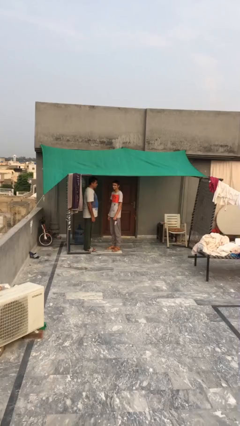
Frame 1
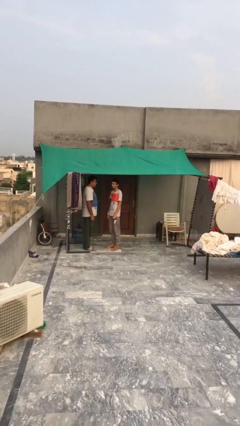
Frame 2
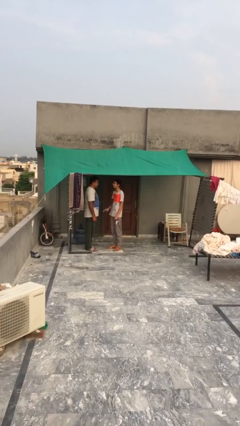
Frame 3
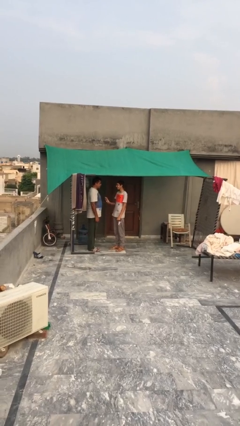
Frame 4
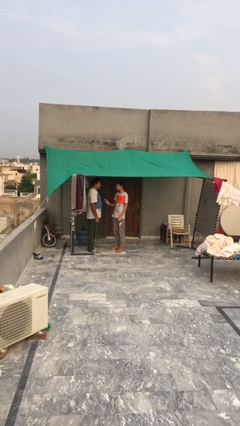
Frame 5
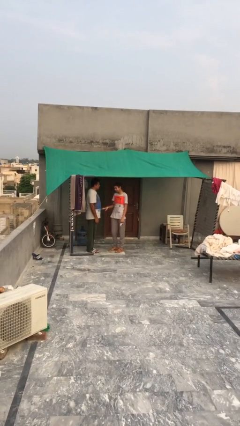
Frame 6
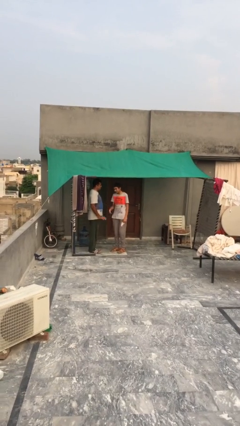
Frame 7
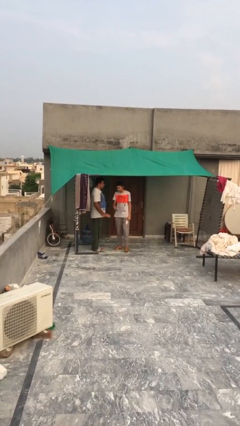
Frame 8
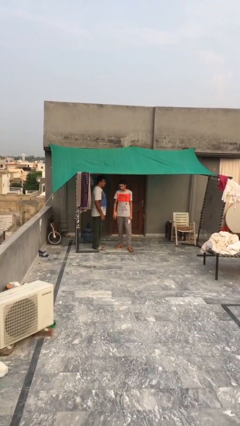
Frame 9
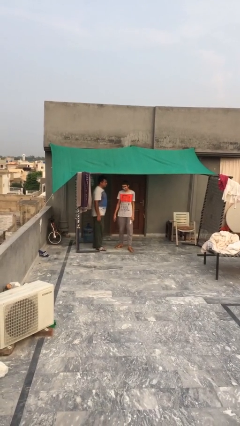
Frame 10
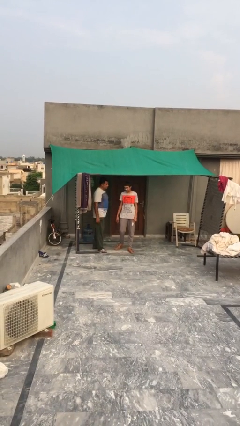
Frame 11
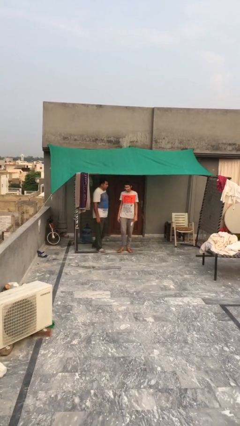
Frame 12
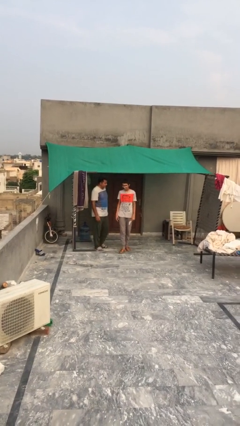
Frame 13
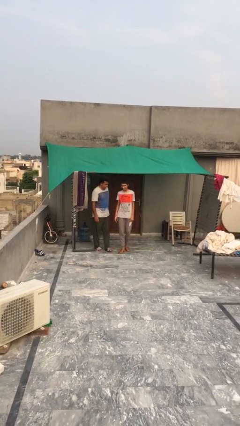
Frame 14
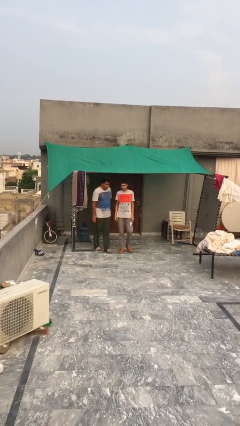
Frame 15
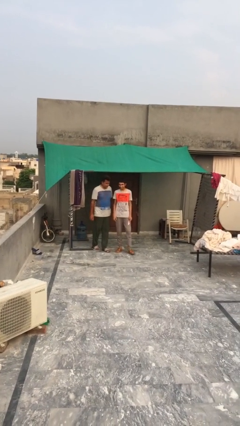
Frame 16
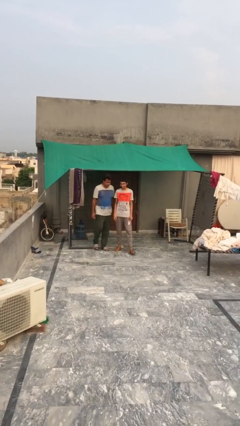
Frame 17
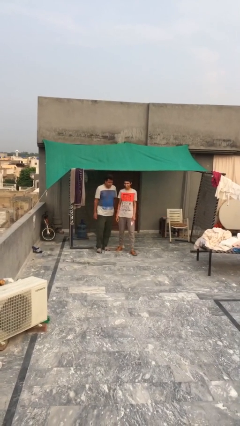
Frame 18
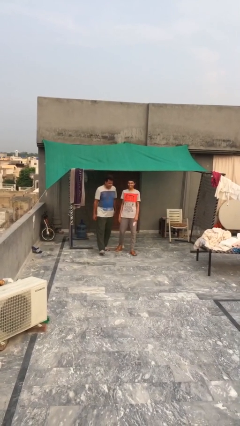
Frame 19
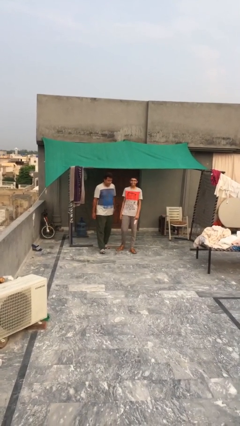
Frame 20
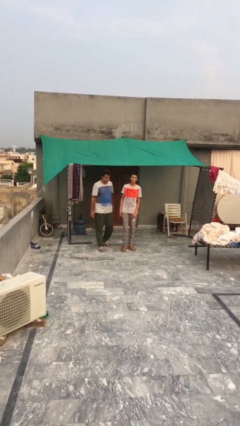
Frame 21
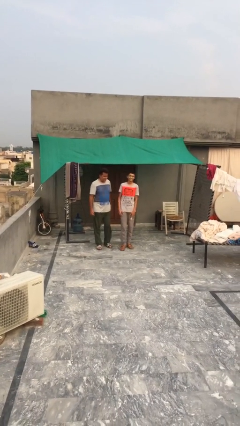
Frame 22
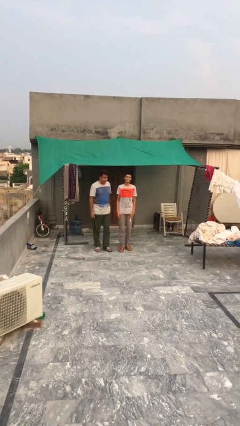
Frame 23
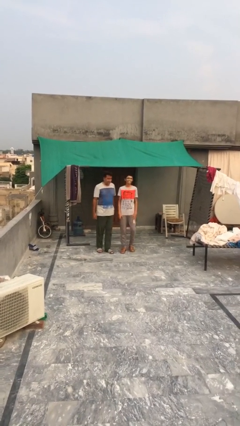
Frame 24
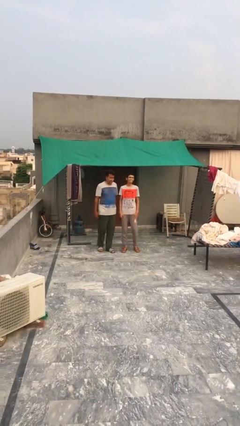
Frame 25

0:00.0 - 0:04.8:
person talks to person

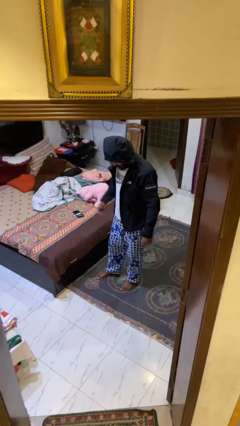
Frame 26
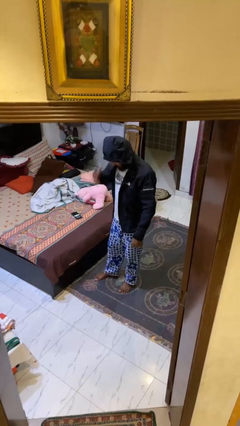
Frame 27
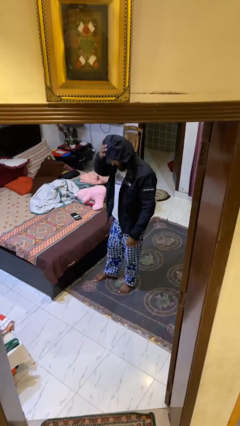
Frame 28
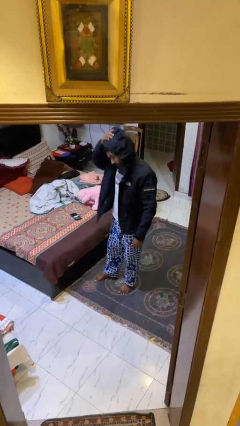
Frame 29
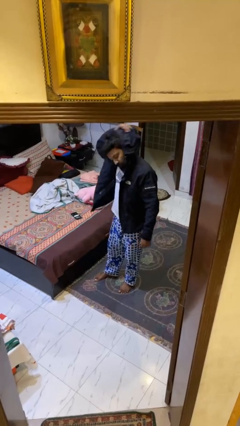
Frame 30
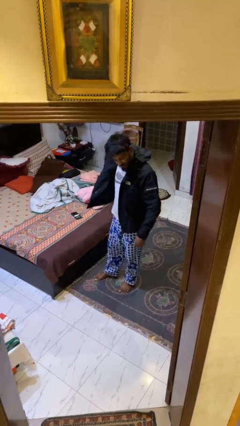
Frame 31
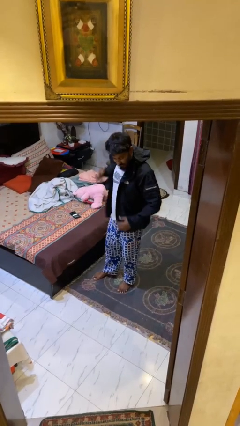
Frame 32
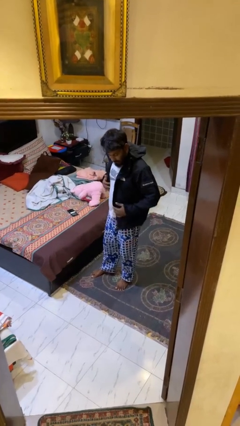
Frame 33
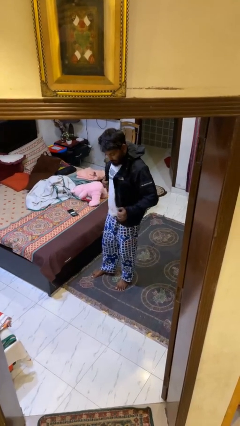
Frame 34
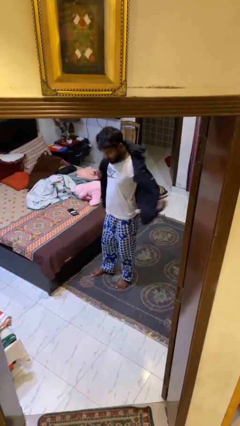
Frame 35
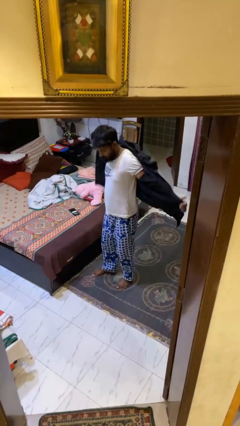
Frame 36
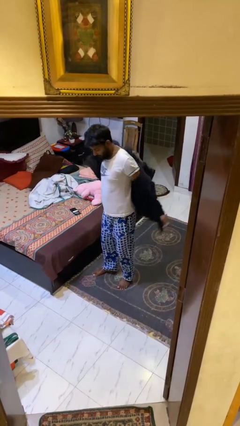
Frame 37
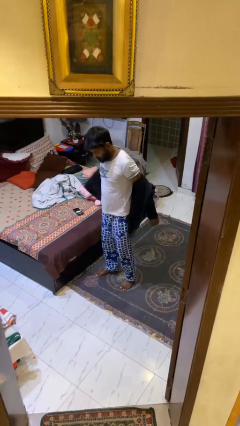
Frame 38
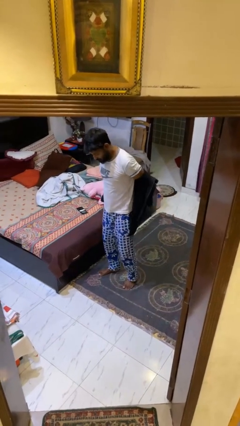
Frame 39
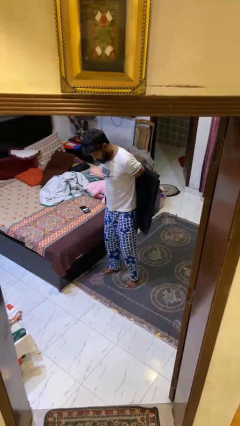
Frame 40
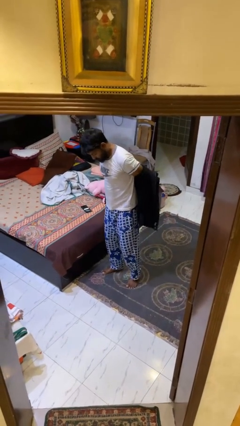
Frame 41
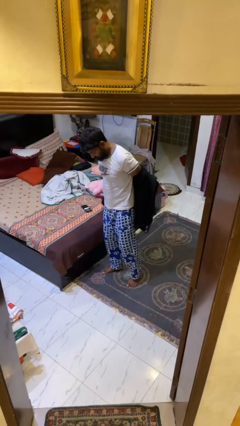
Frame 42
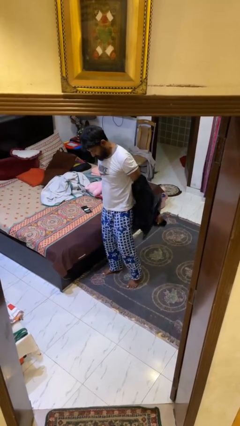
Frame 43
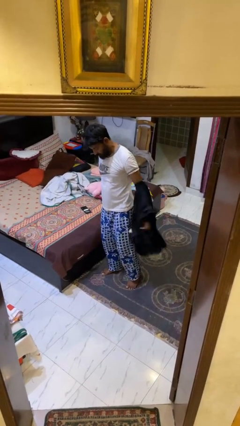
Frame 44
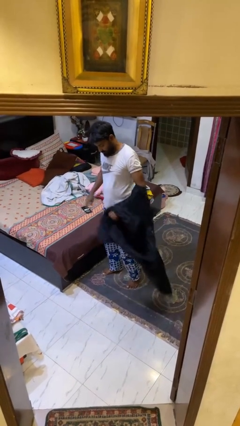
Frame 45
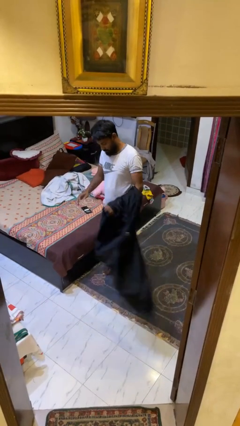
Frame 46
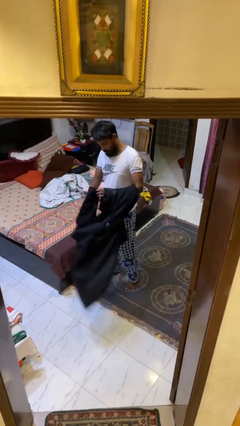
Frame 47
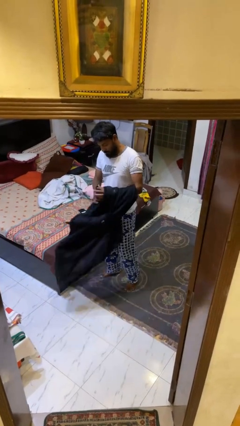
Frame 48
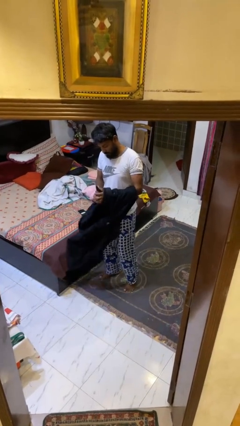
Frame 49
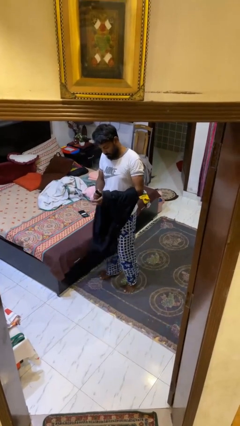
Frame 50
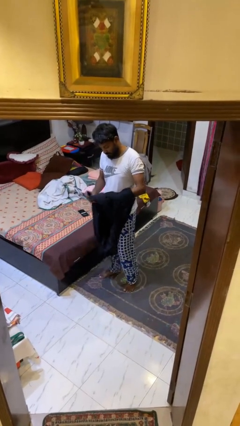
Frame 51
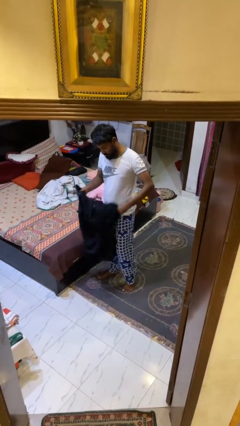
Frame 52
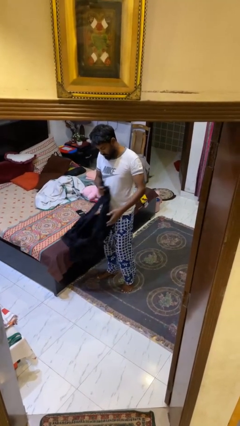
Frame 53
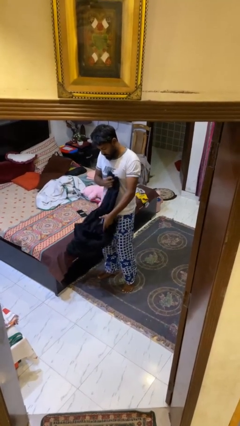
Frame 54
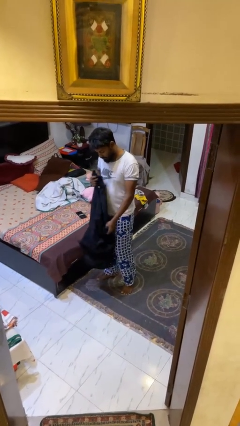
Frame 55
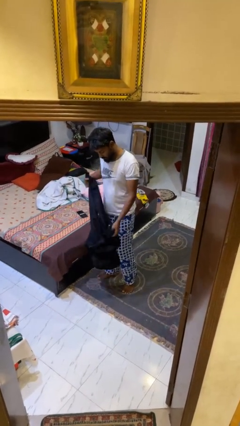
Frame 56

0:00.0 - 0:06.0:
person takes off hoodie

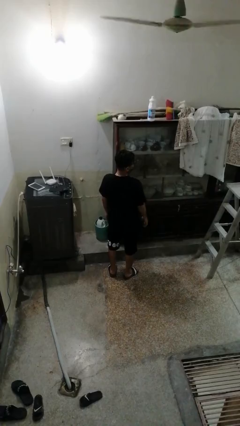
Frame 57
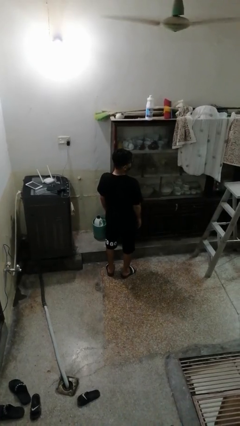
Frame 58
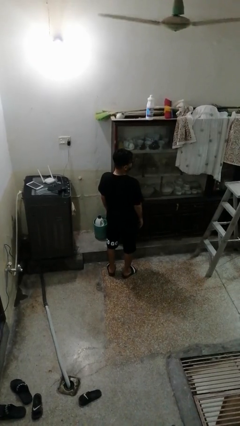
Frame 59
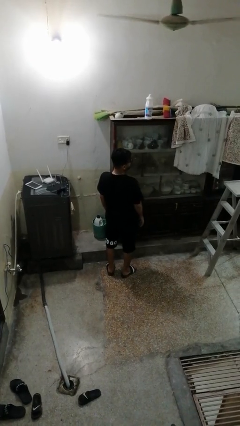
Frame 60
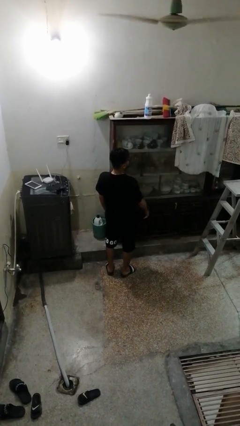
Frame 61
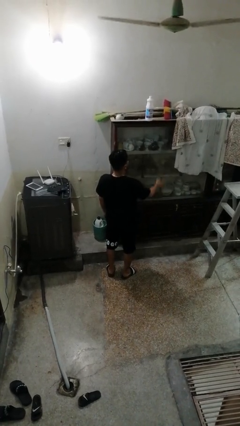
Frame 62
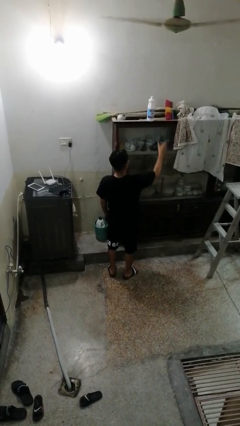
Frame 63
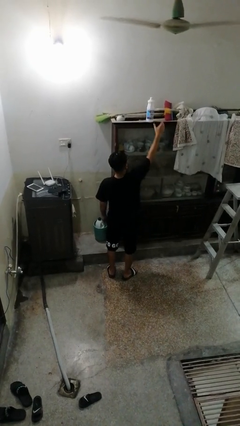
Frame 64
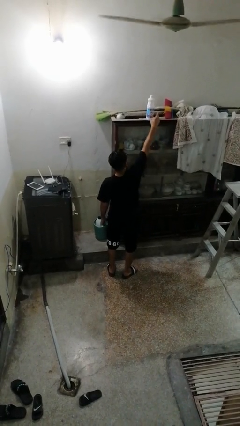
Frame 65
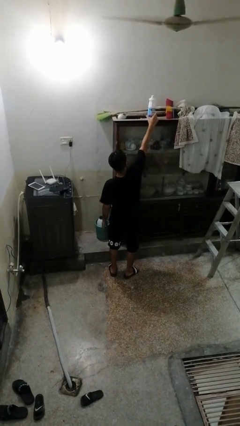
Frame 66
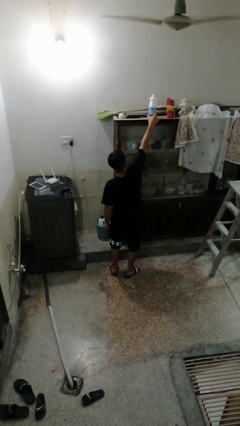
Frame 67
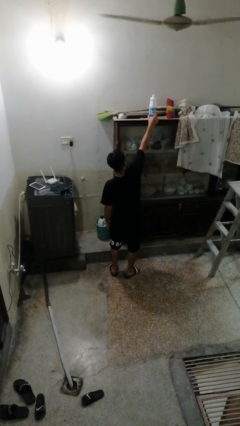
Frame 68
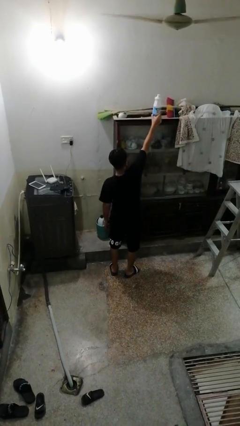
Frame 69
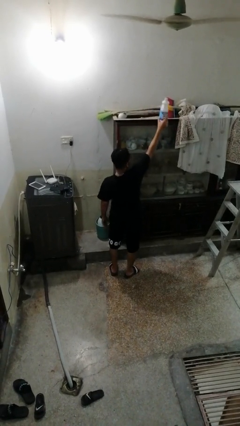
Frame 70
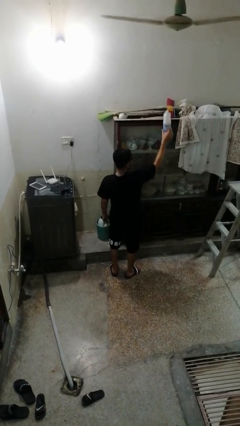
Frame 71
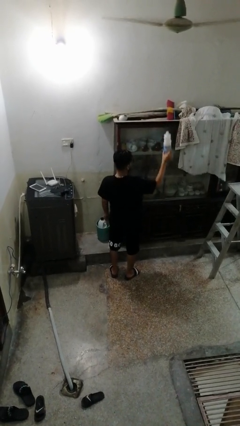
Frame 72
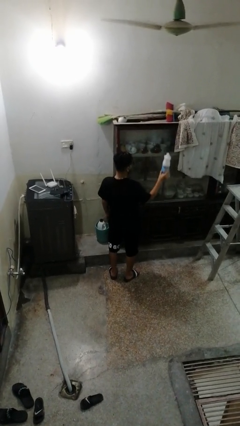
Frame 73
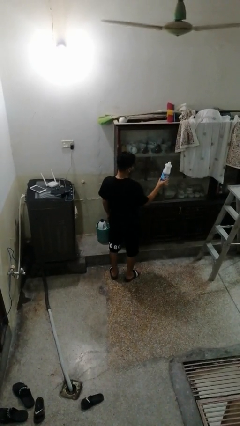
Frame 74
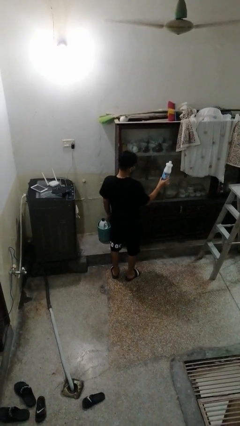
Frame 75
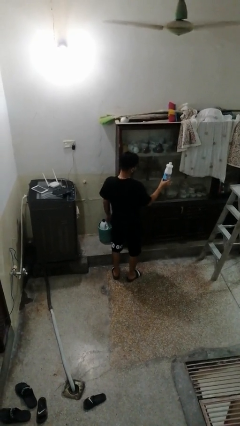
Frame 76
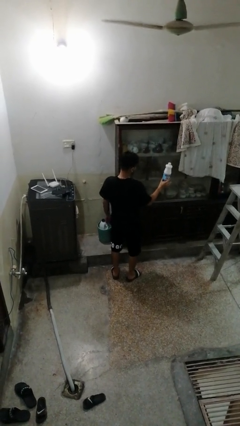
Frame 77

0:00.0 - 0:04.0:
person picks up object from shelf

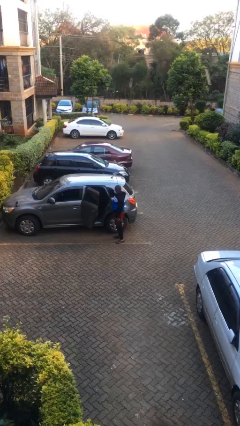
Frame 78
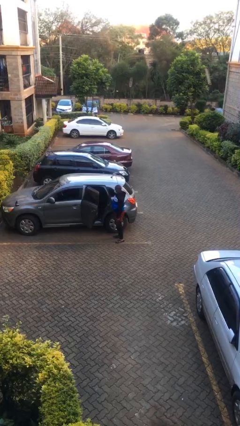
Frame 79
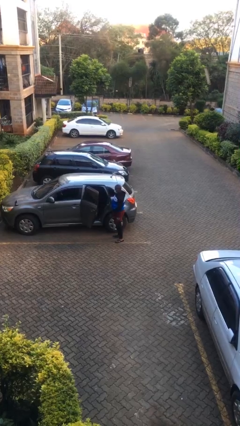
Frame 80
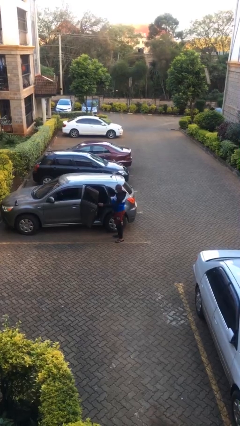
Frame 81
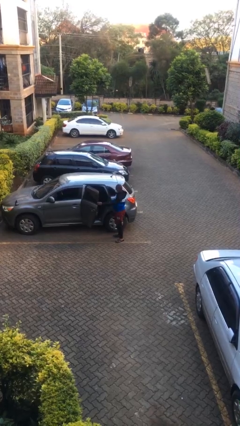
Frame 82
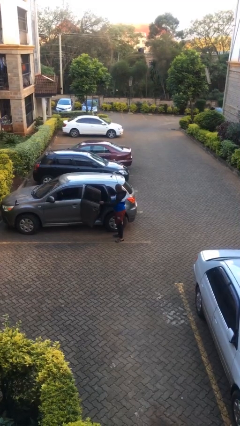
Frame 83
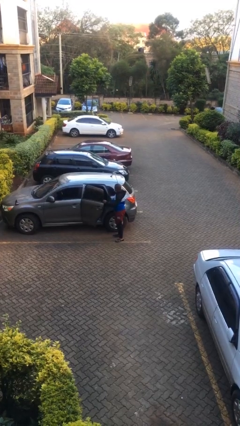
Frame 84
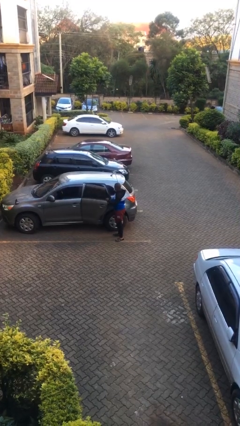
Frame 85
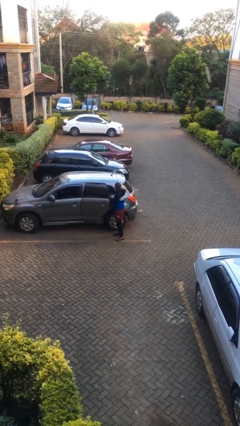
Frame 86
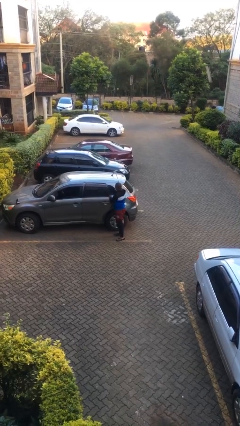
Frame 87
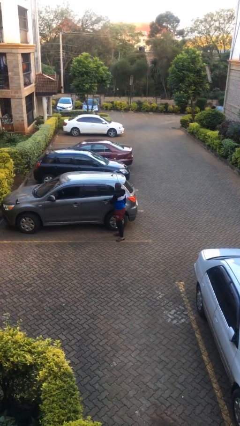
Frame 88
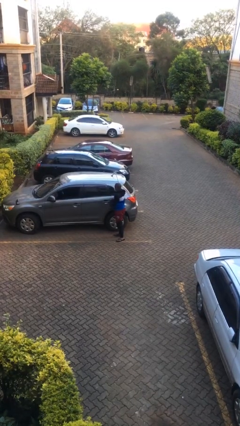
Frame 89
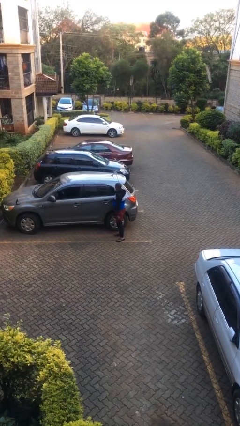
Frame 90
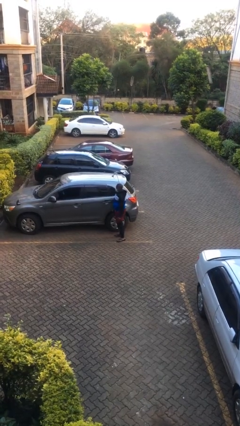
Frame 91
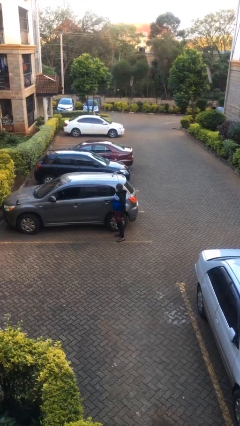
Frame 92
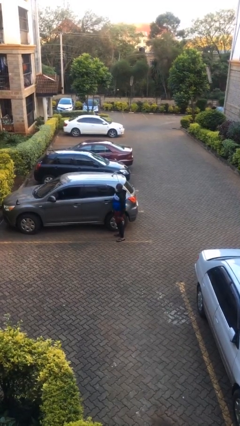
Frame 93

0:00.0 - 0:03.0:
person closes car door

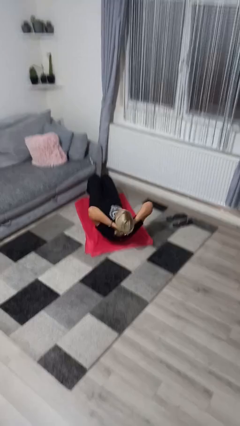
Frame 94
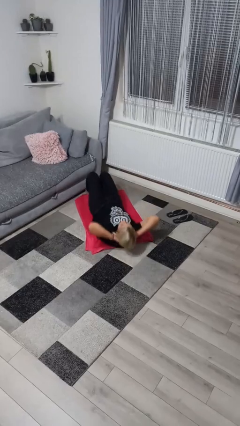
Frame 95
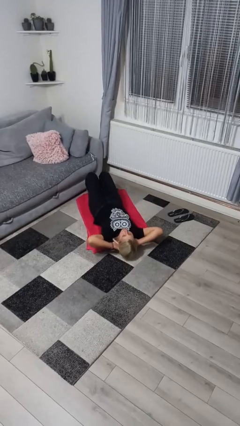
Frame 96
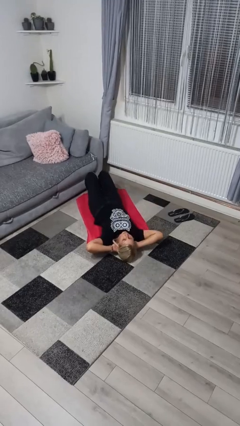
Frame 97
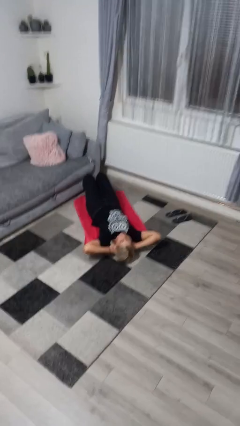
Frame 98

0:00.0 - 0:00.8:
person exercises with situp
